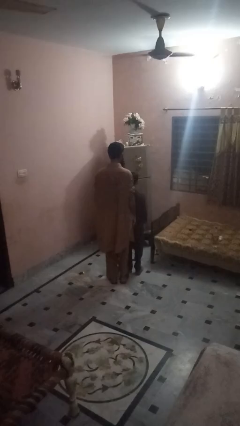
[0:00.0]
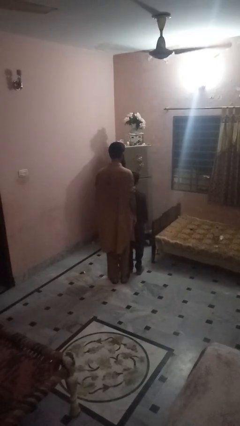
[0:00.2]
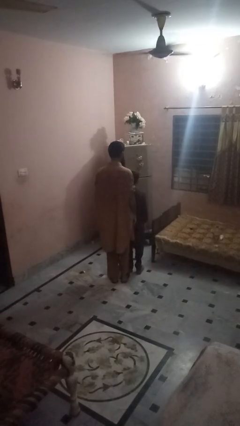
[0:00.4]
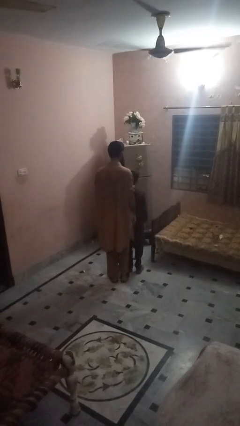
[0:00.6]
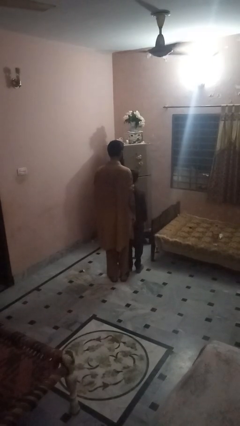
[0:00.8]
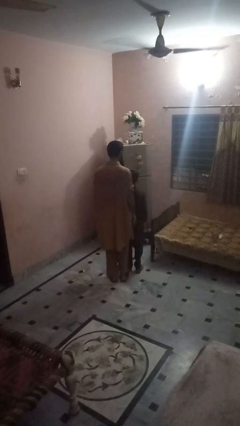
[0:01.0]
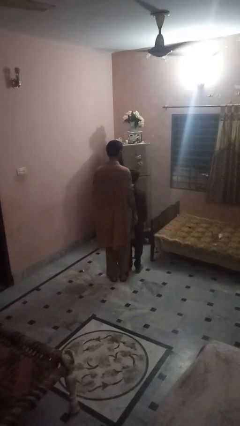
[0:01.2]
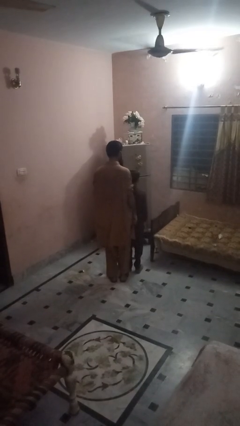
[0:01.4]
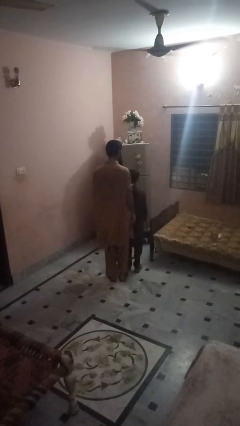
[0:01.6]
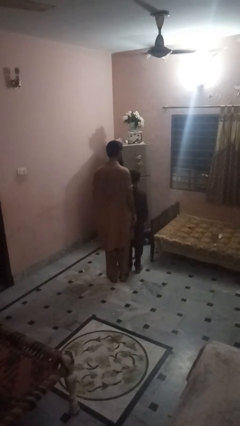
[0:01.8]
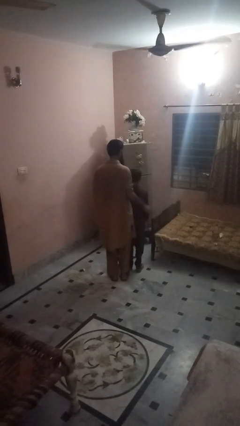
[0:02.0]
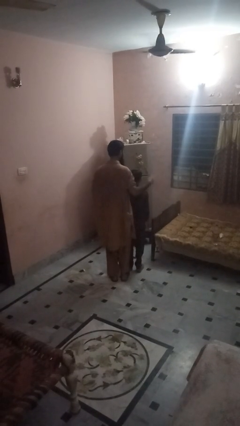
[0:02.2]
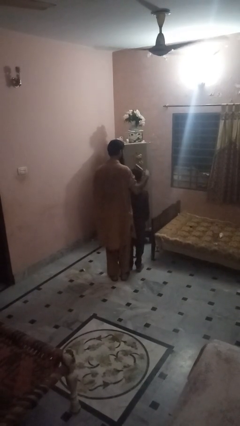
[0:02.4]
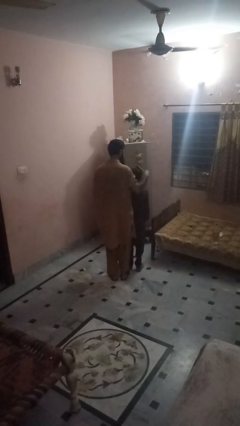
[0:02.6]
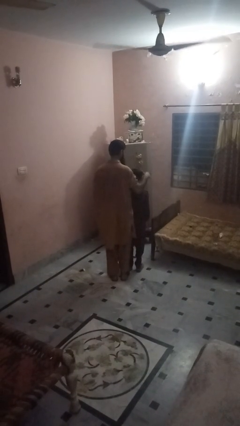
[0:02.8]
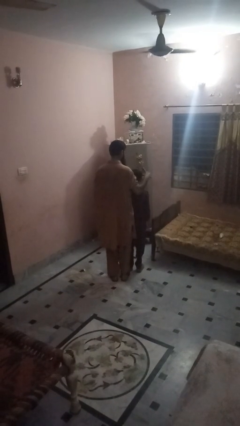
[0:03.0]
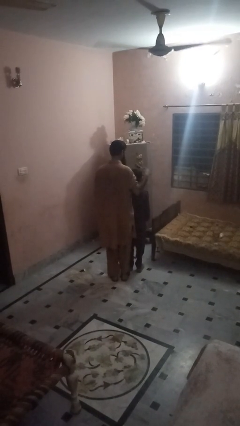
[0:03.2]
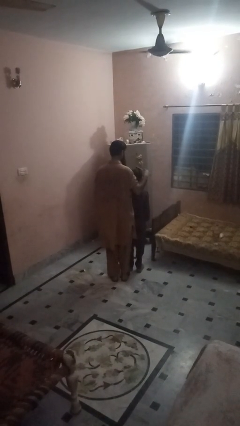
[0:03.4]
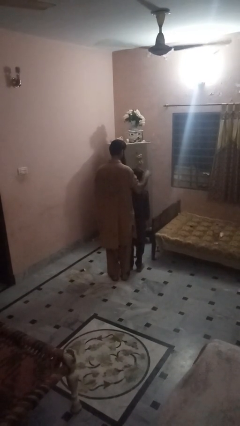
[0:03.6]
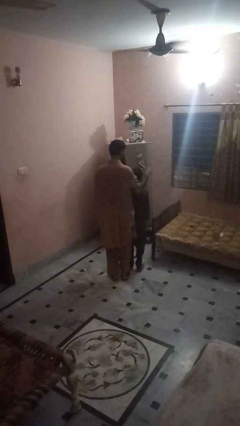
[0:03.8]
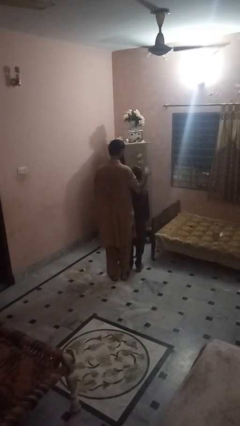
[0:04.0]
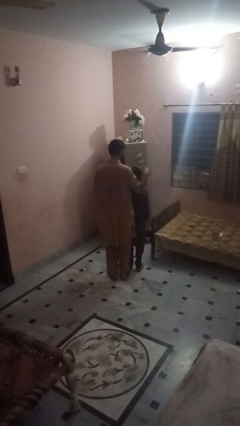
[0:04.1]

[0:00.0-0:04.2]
person brushes hair of person

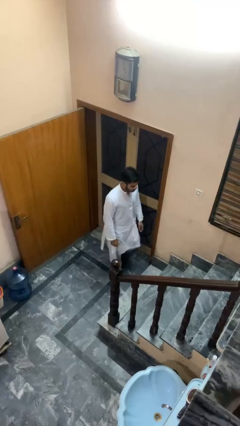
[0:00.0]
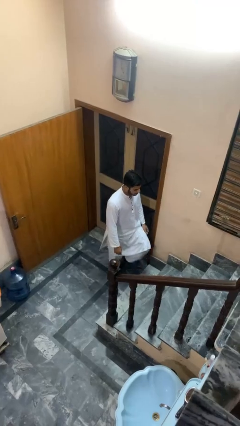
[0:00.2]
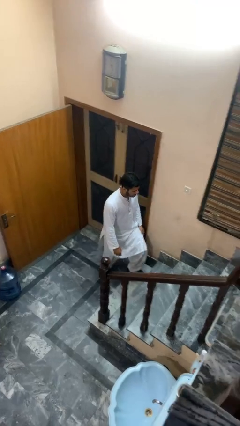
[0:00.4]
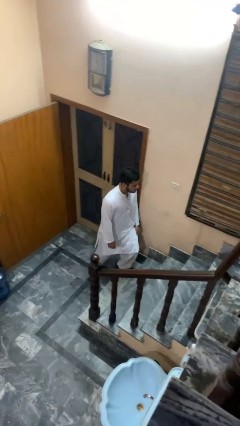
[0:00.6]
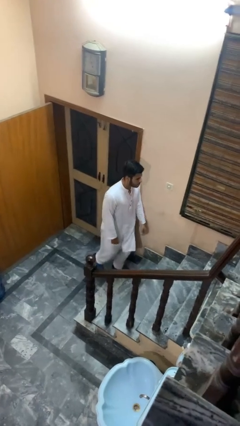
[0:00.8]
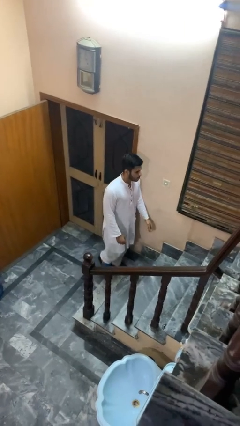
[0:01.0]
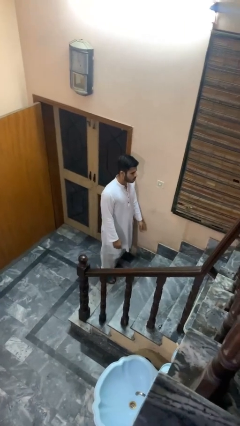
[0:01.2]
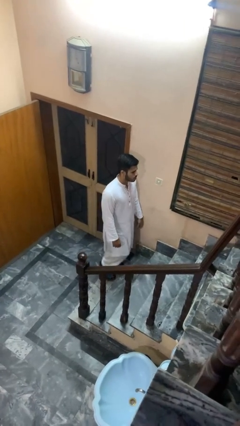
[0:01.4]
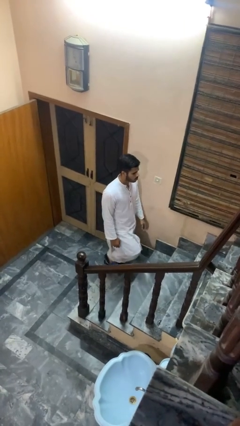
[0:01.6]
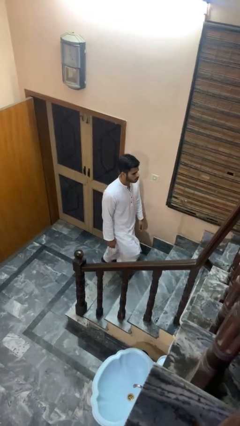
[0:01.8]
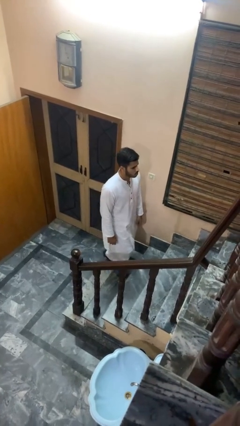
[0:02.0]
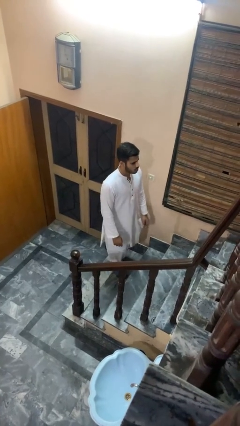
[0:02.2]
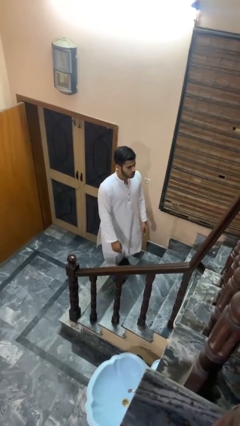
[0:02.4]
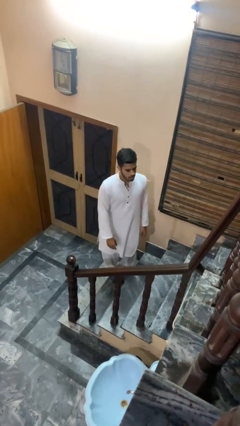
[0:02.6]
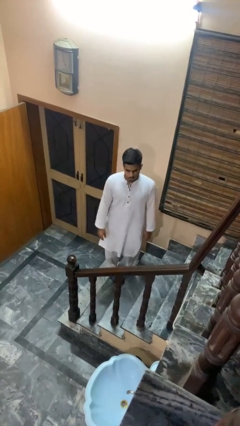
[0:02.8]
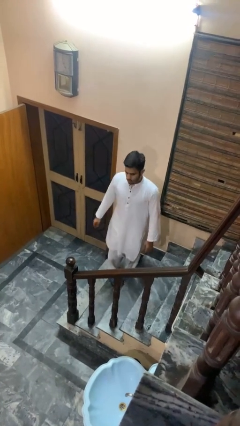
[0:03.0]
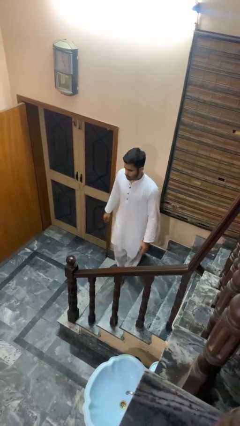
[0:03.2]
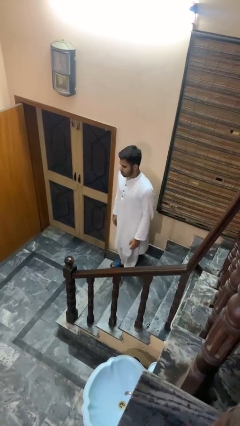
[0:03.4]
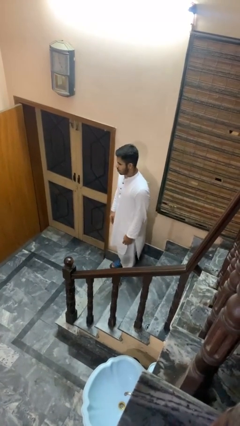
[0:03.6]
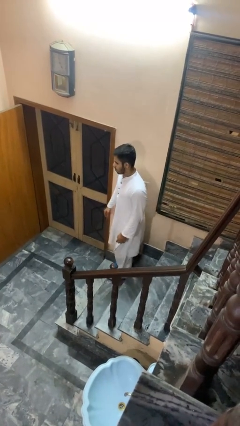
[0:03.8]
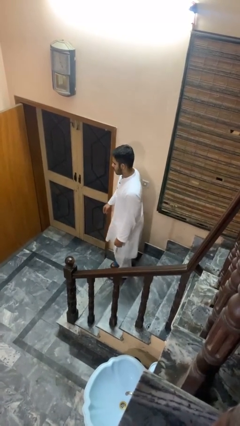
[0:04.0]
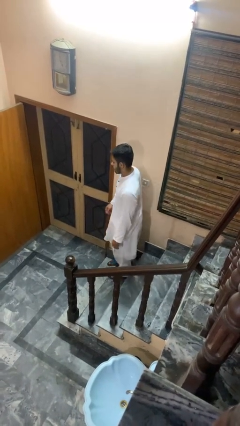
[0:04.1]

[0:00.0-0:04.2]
person climbs up stairs

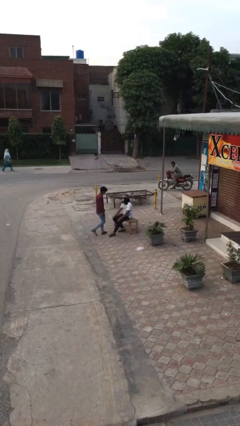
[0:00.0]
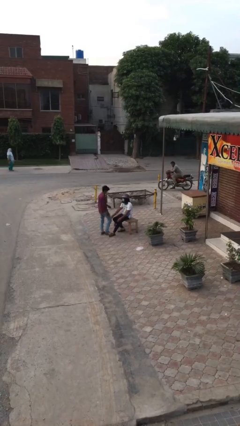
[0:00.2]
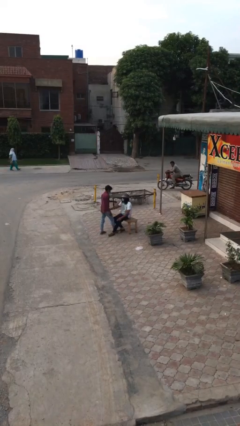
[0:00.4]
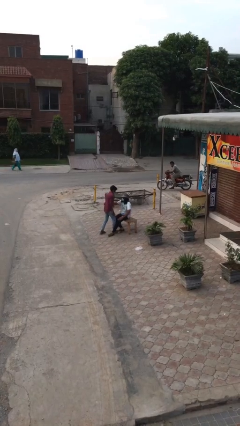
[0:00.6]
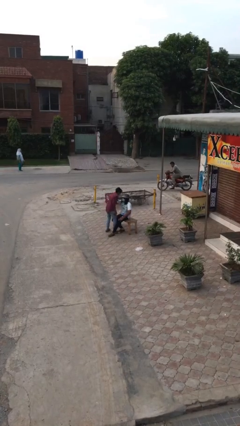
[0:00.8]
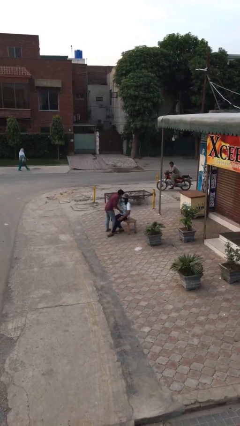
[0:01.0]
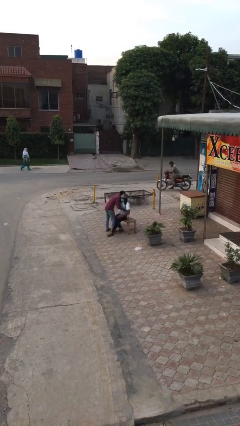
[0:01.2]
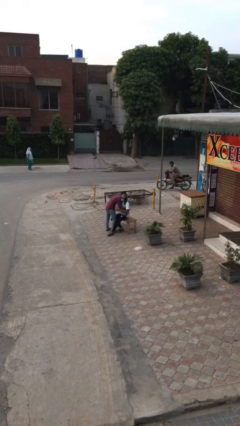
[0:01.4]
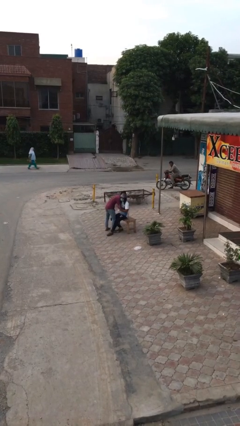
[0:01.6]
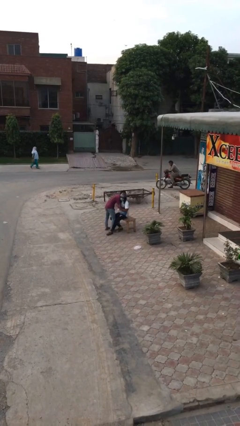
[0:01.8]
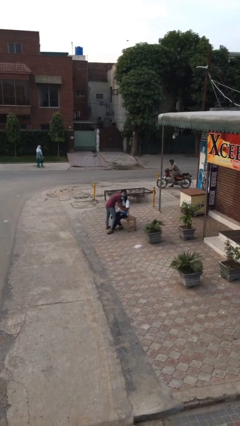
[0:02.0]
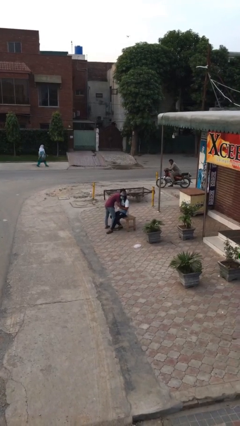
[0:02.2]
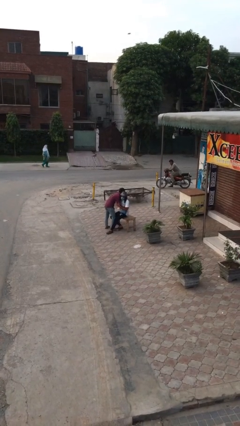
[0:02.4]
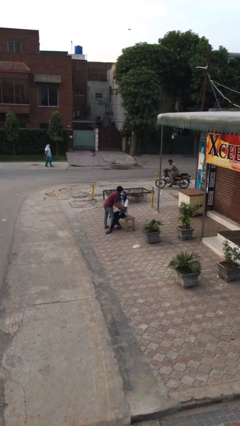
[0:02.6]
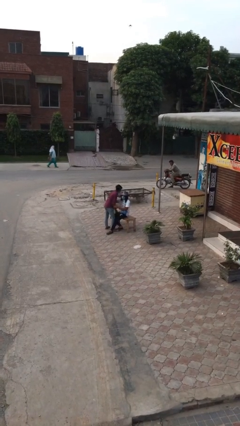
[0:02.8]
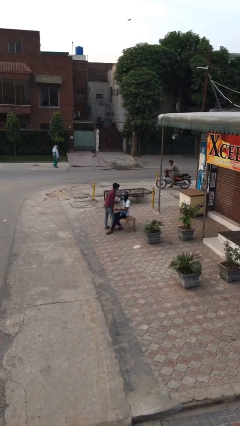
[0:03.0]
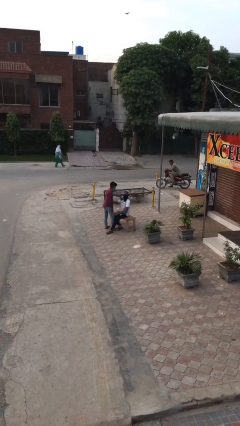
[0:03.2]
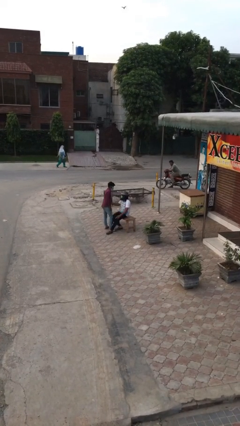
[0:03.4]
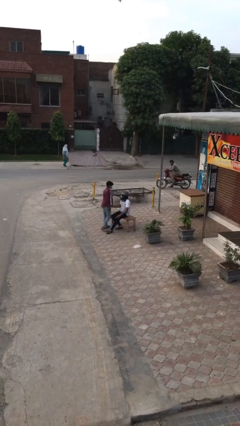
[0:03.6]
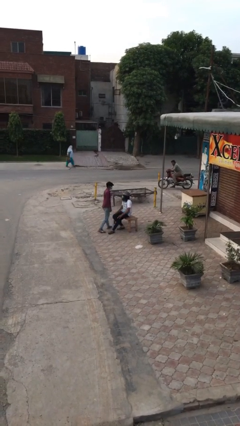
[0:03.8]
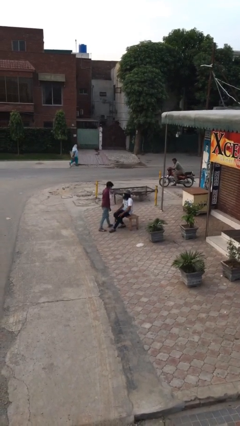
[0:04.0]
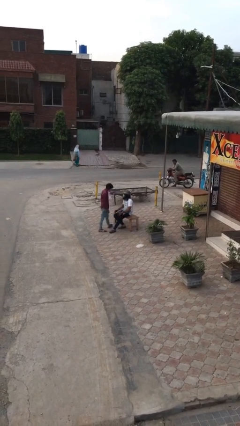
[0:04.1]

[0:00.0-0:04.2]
person embraces person

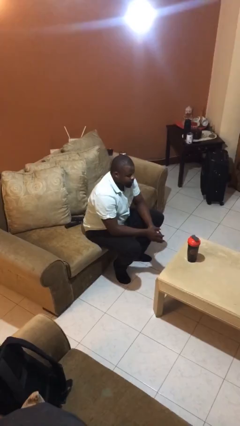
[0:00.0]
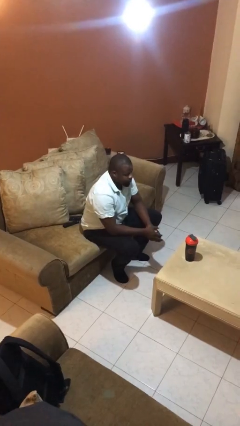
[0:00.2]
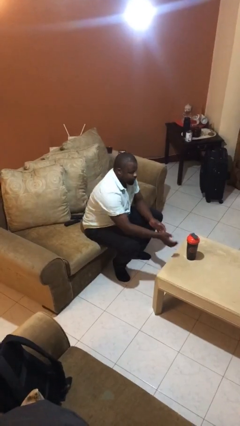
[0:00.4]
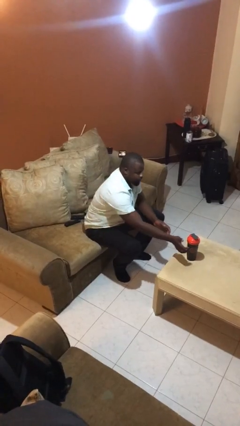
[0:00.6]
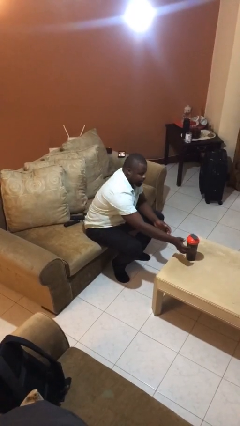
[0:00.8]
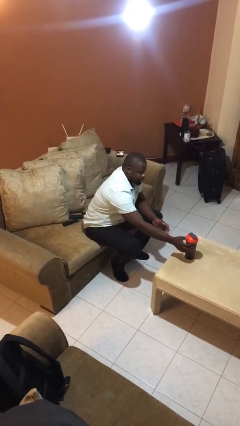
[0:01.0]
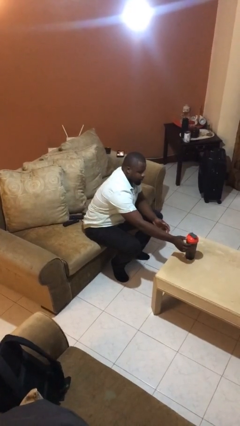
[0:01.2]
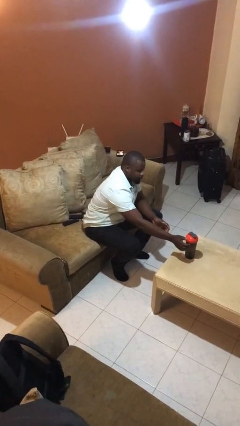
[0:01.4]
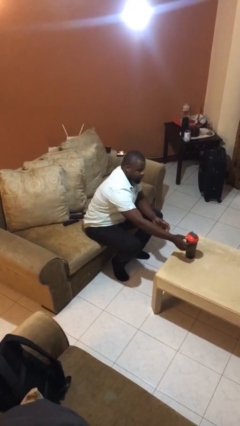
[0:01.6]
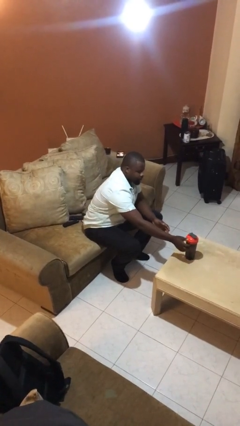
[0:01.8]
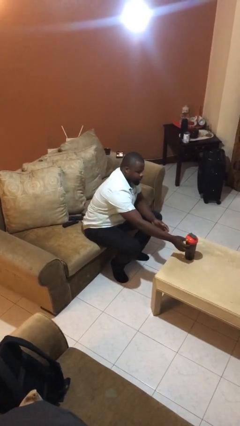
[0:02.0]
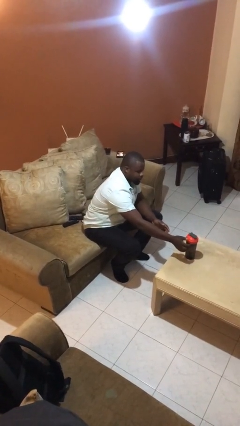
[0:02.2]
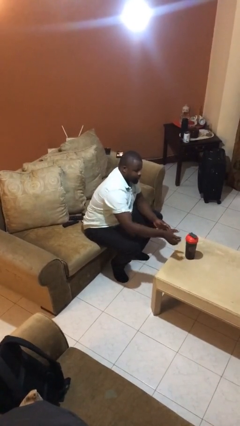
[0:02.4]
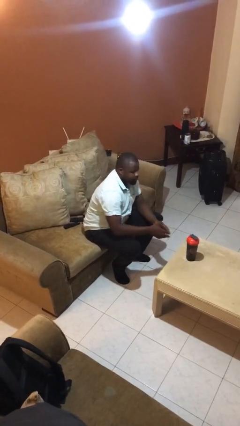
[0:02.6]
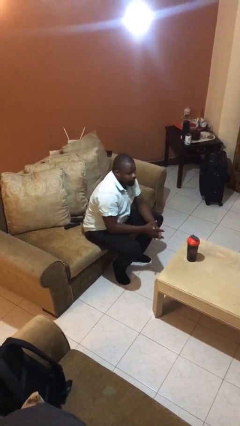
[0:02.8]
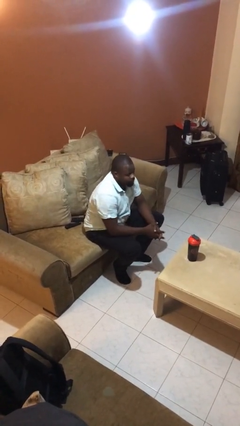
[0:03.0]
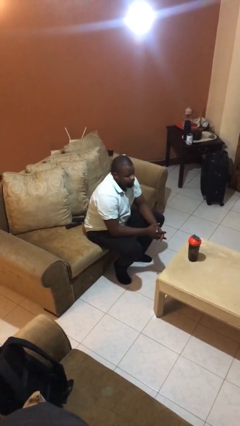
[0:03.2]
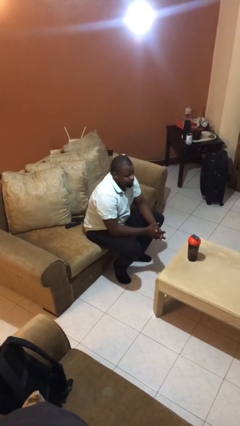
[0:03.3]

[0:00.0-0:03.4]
person taps object with finger

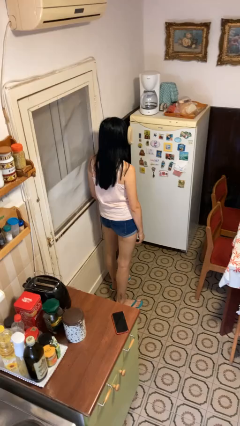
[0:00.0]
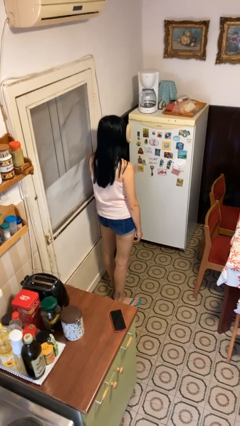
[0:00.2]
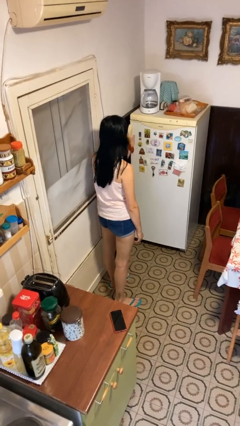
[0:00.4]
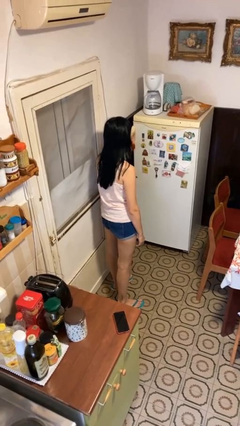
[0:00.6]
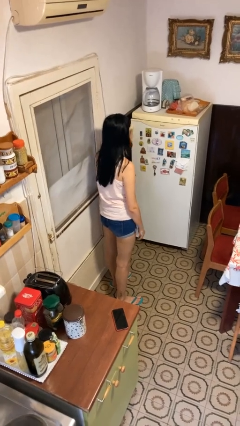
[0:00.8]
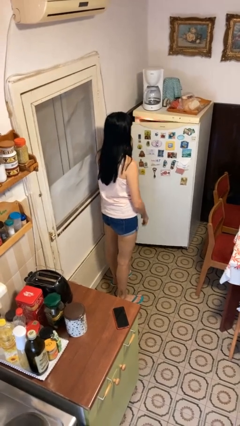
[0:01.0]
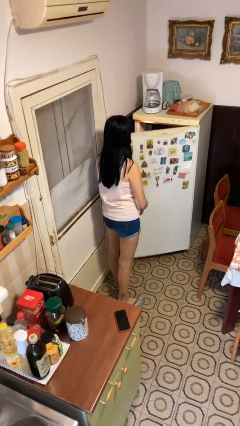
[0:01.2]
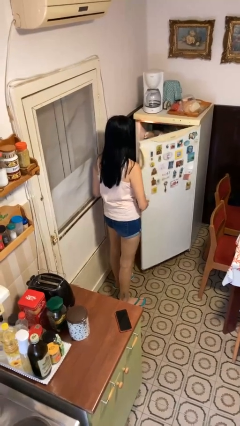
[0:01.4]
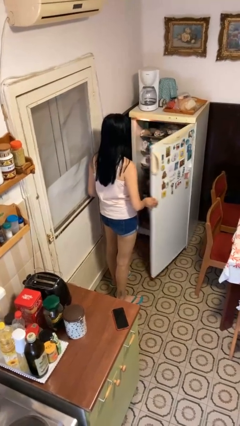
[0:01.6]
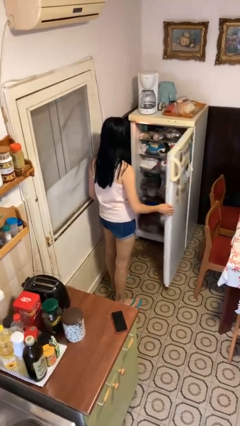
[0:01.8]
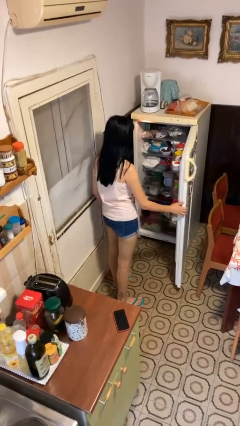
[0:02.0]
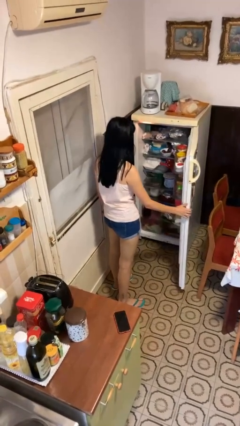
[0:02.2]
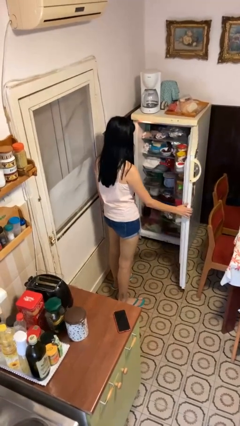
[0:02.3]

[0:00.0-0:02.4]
person opens refrigerator
